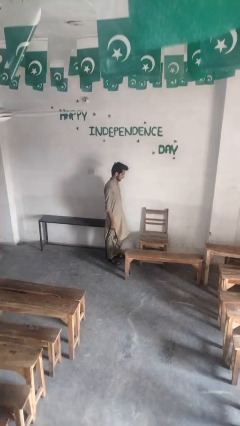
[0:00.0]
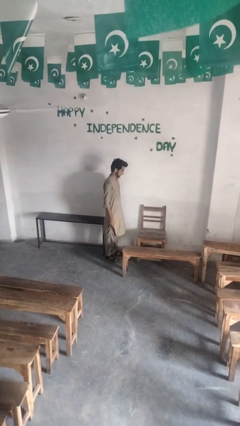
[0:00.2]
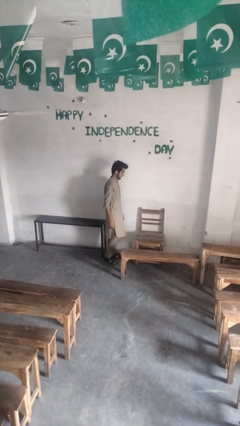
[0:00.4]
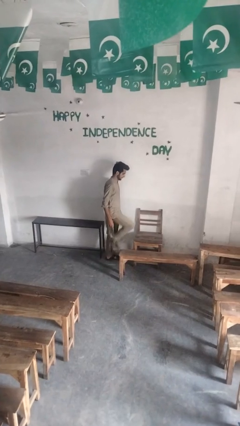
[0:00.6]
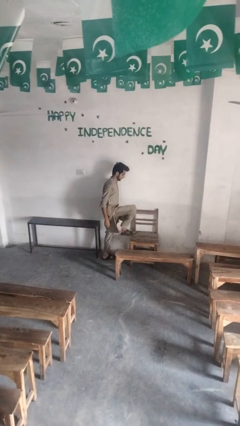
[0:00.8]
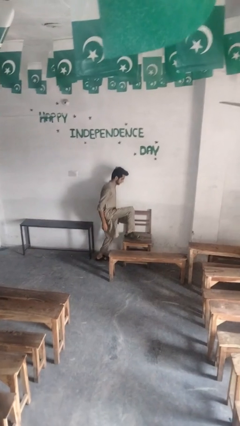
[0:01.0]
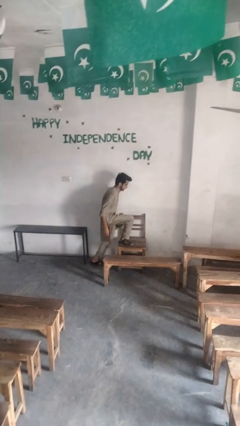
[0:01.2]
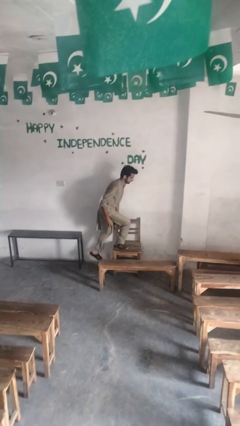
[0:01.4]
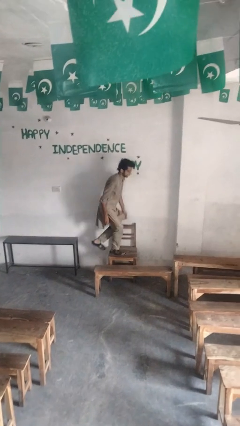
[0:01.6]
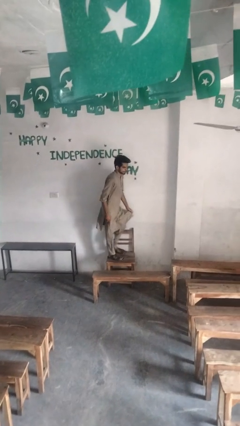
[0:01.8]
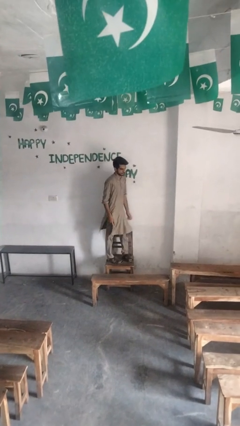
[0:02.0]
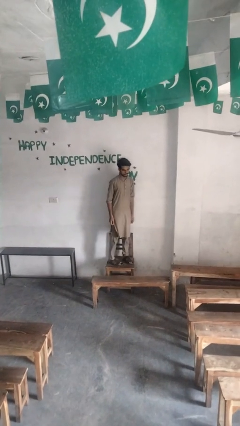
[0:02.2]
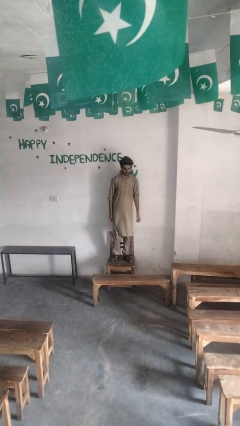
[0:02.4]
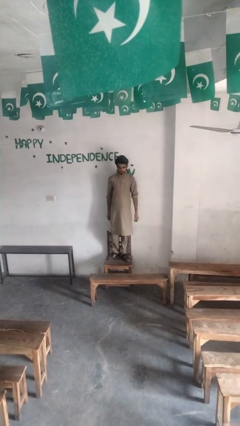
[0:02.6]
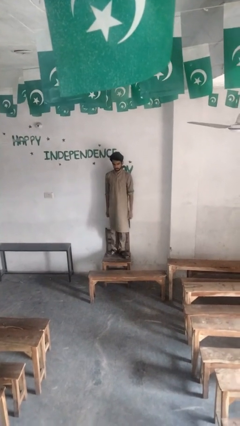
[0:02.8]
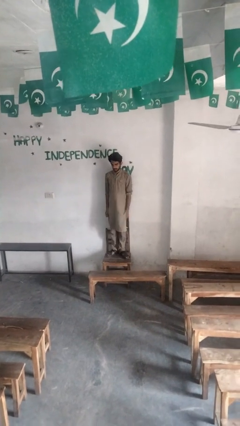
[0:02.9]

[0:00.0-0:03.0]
person climbs on chair

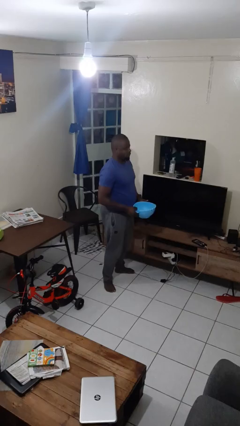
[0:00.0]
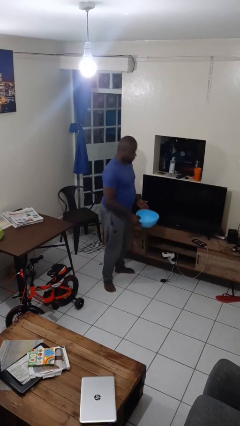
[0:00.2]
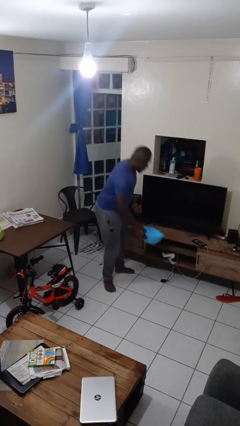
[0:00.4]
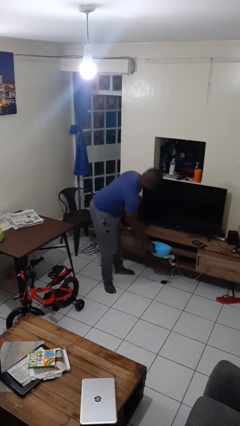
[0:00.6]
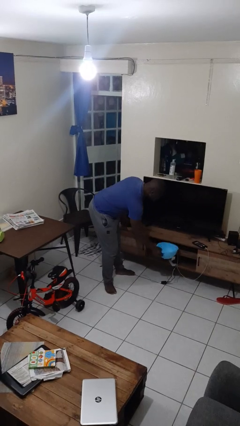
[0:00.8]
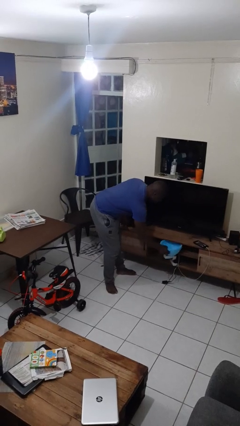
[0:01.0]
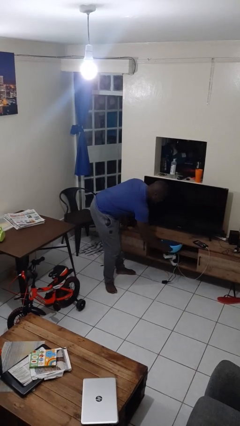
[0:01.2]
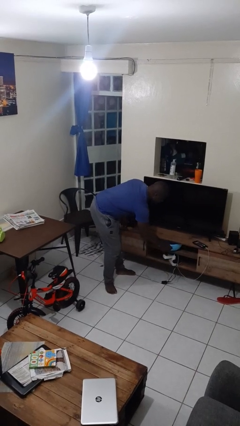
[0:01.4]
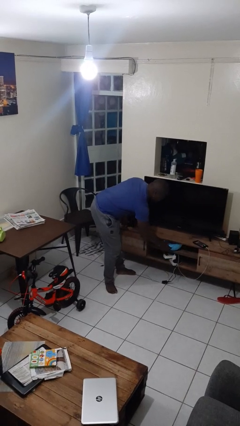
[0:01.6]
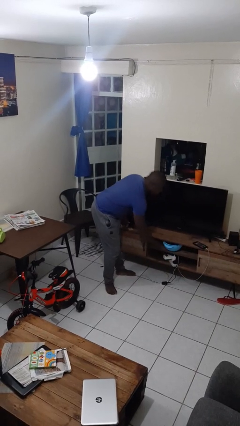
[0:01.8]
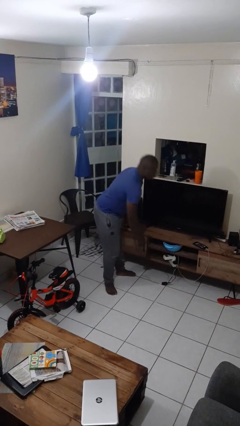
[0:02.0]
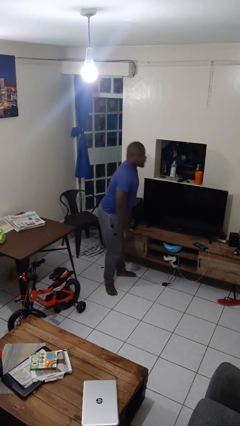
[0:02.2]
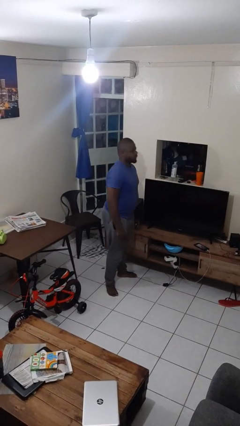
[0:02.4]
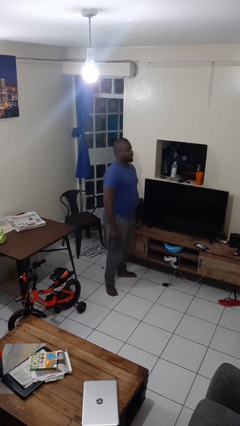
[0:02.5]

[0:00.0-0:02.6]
person puts down object into cabinet

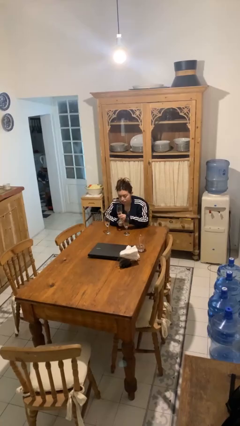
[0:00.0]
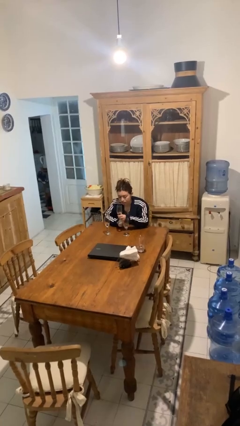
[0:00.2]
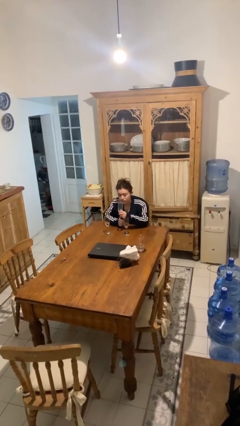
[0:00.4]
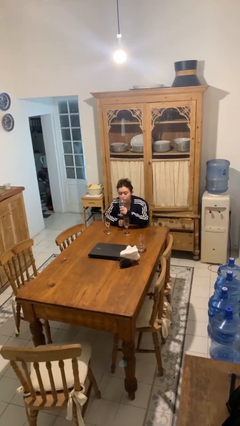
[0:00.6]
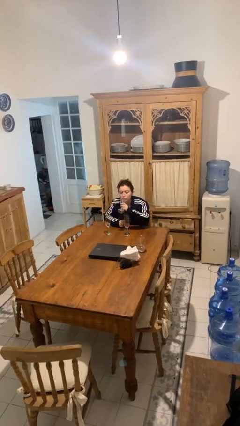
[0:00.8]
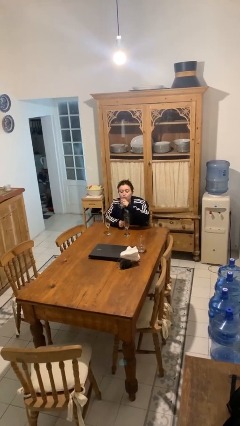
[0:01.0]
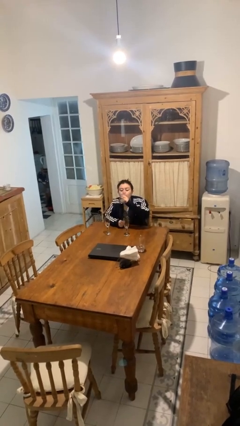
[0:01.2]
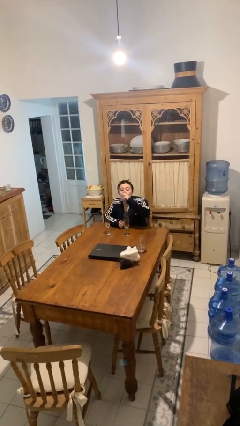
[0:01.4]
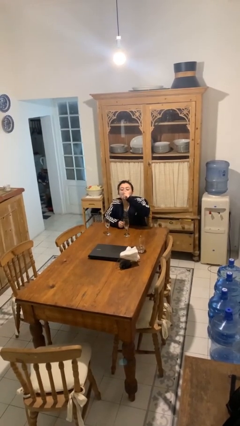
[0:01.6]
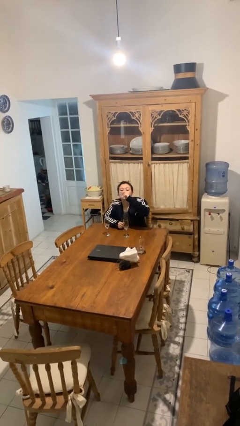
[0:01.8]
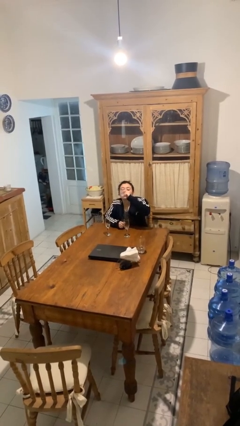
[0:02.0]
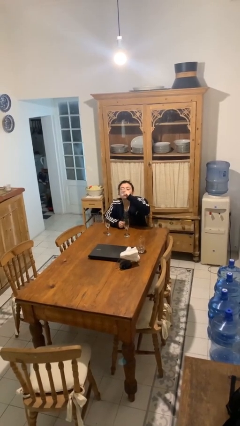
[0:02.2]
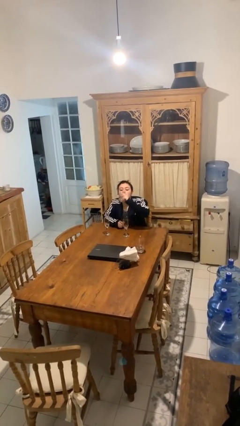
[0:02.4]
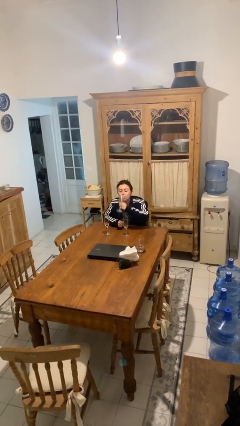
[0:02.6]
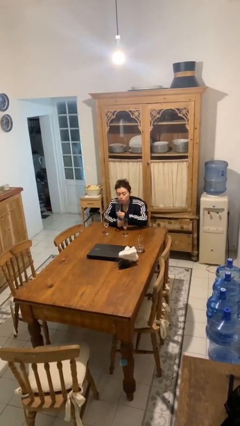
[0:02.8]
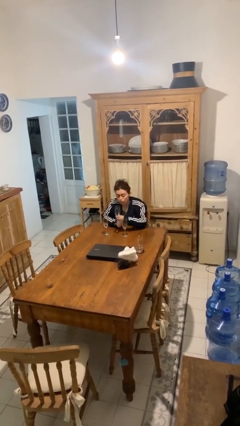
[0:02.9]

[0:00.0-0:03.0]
person drinks from shotglass

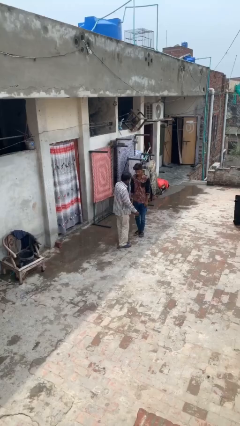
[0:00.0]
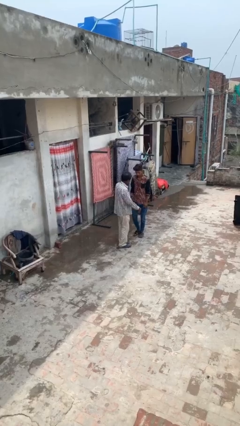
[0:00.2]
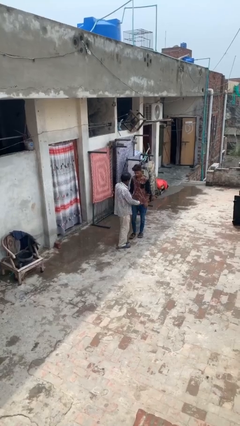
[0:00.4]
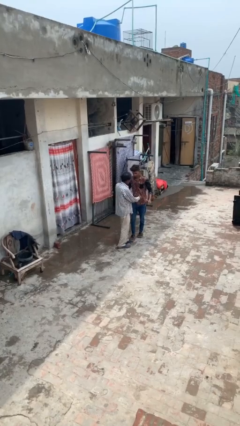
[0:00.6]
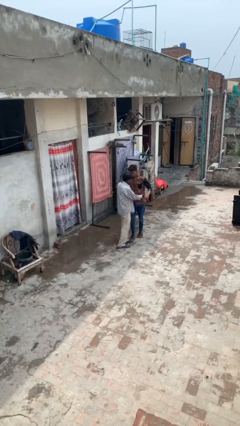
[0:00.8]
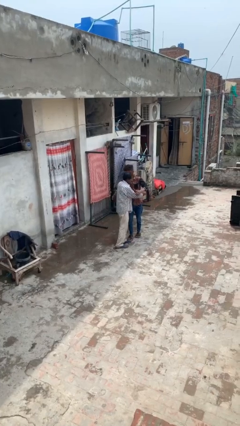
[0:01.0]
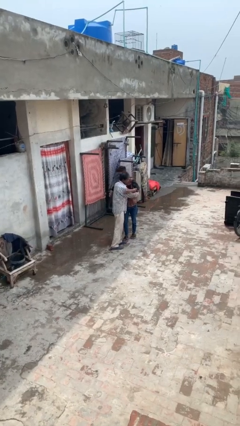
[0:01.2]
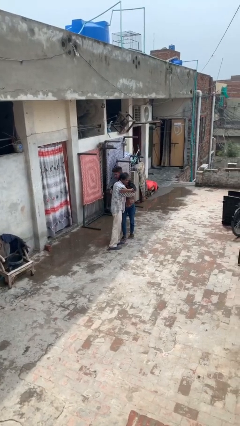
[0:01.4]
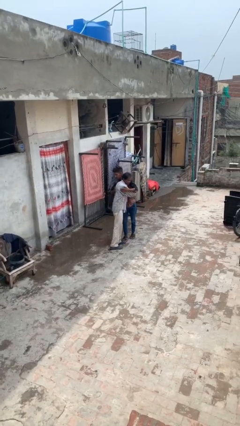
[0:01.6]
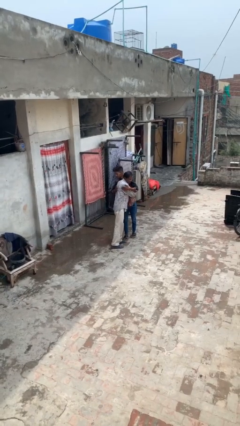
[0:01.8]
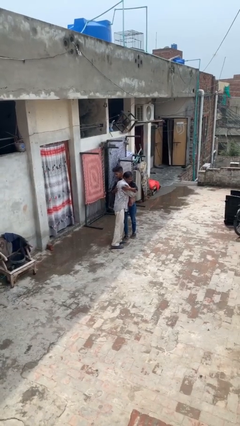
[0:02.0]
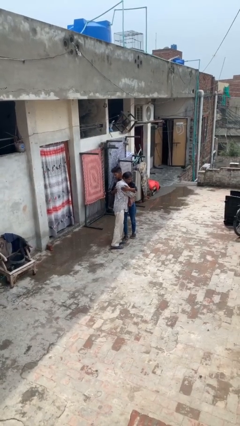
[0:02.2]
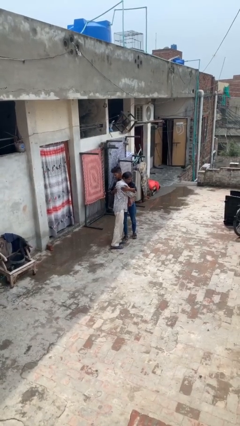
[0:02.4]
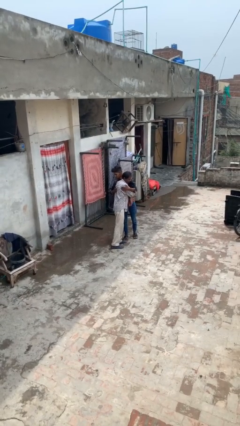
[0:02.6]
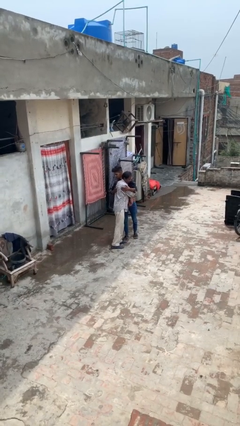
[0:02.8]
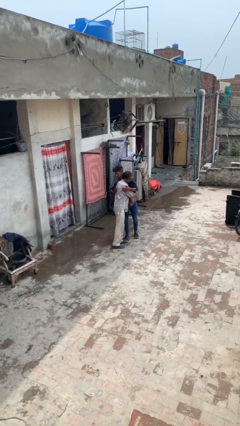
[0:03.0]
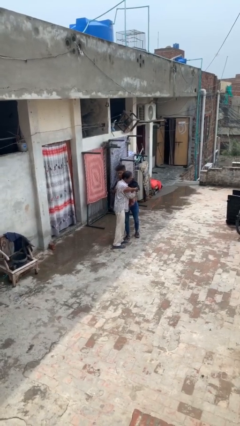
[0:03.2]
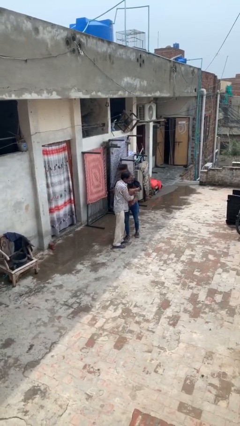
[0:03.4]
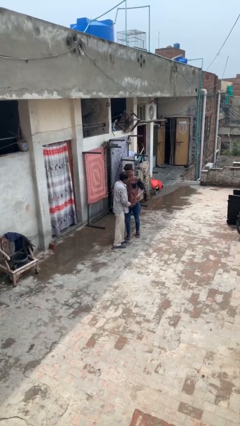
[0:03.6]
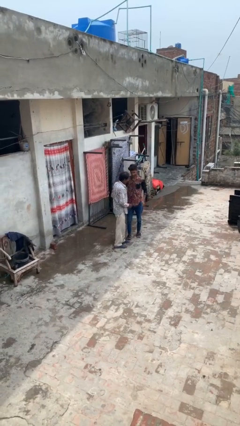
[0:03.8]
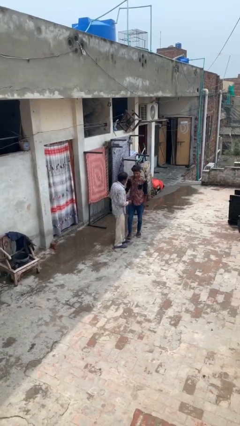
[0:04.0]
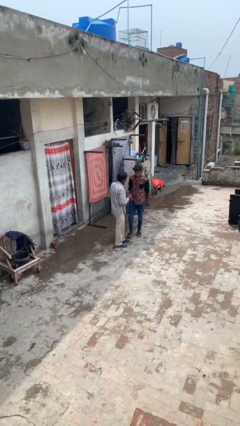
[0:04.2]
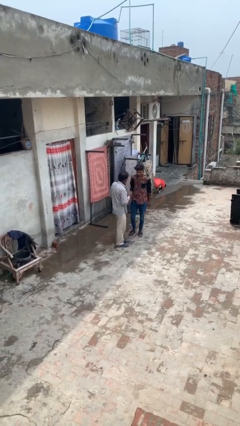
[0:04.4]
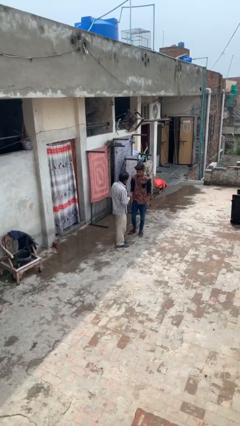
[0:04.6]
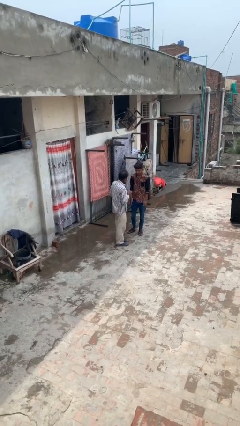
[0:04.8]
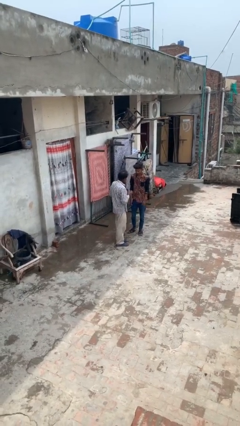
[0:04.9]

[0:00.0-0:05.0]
person embraces person

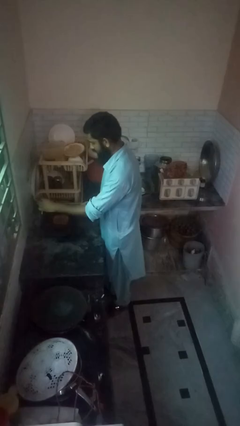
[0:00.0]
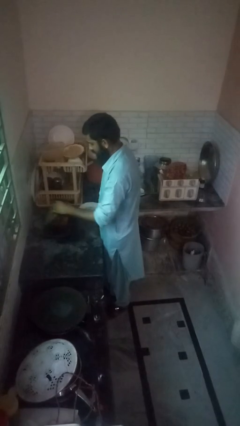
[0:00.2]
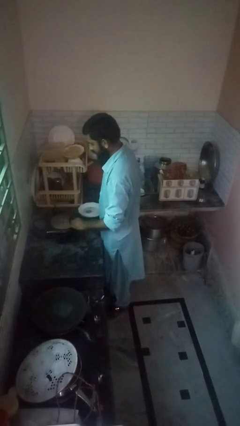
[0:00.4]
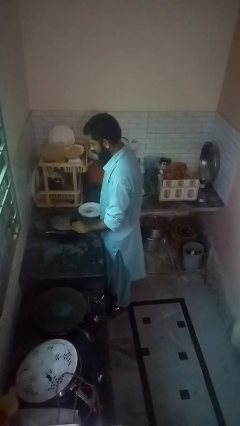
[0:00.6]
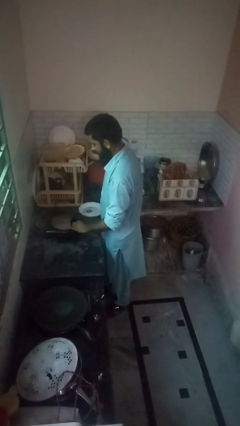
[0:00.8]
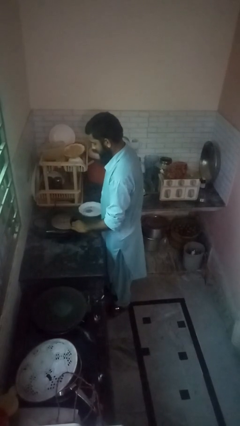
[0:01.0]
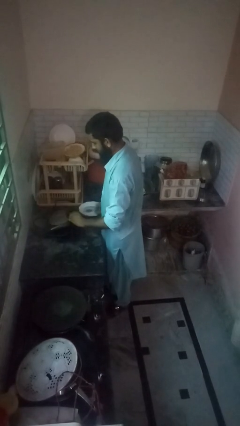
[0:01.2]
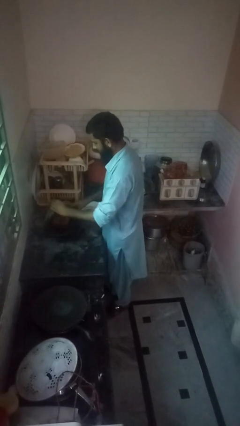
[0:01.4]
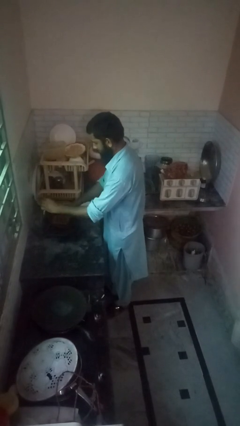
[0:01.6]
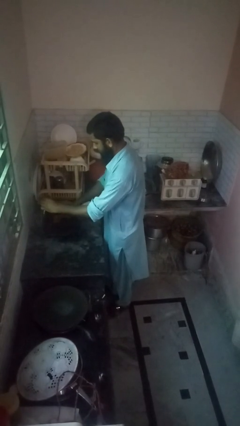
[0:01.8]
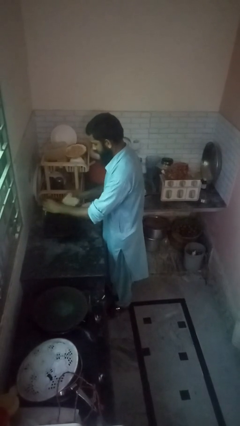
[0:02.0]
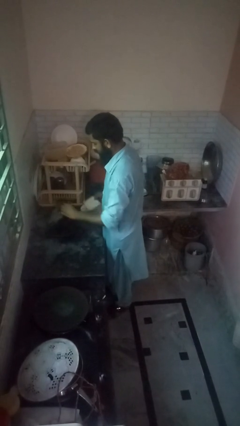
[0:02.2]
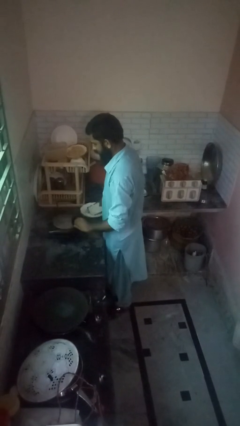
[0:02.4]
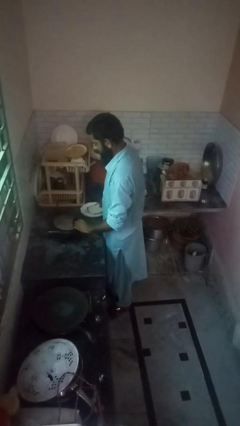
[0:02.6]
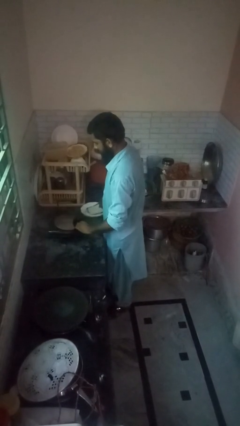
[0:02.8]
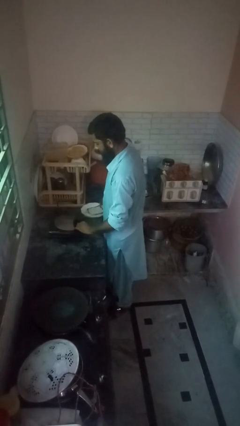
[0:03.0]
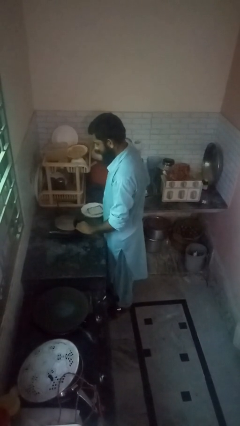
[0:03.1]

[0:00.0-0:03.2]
person takes object from toaster

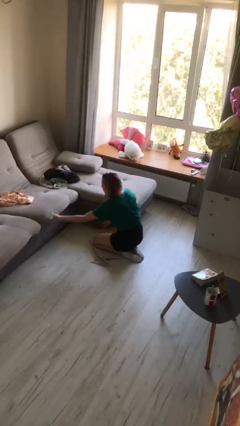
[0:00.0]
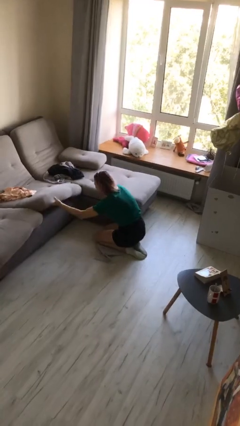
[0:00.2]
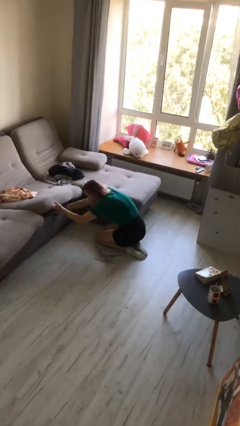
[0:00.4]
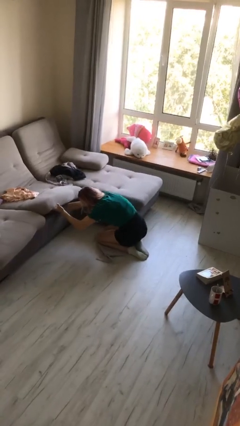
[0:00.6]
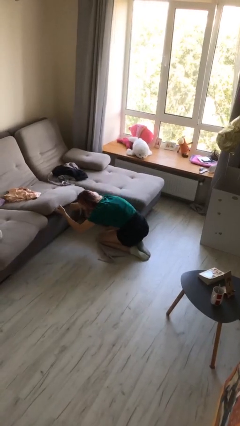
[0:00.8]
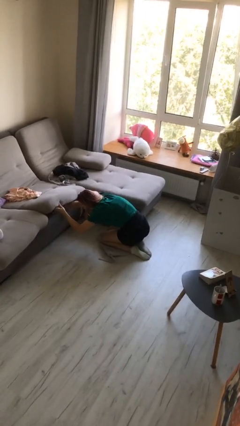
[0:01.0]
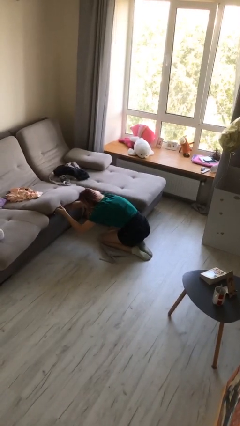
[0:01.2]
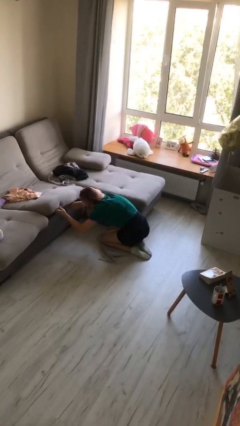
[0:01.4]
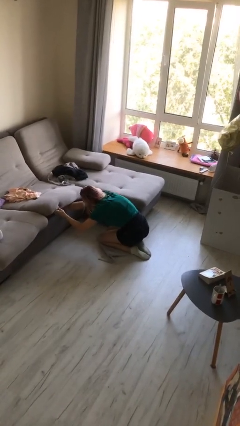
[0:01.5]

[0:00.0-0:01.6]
person searches under couch
